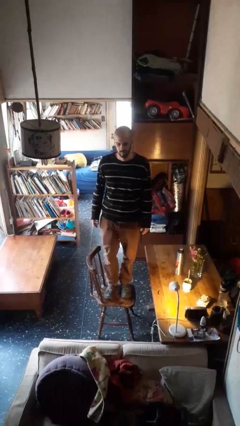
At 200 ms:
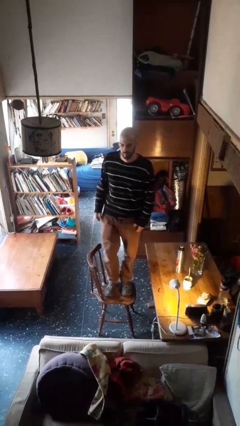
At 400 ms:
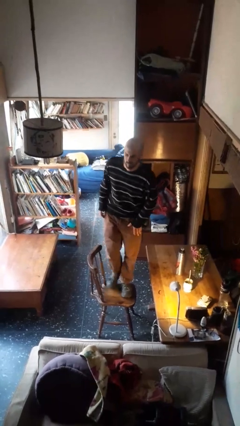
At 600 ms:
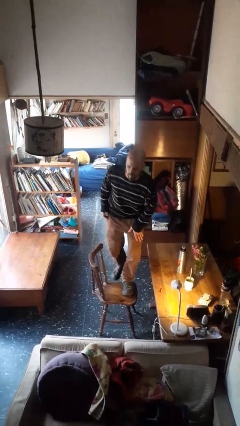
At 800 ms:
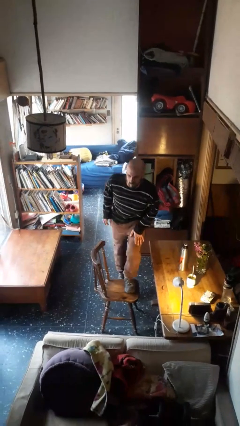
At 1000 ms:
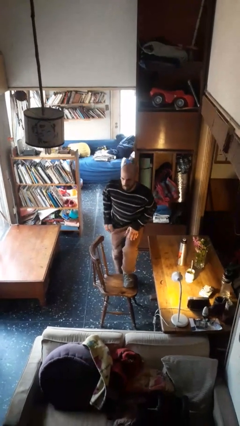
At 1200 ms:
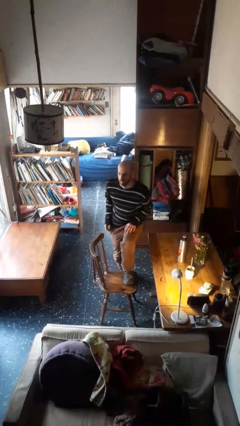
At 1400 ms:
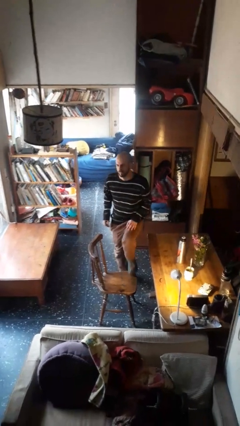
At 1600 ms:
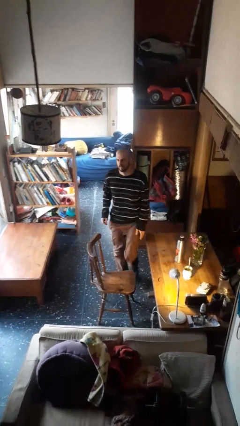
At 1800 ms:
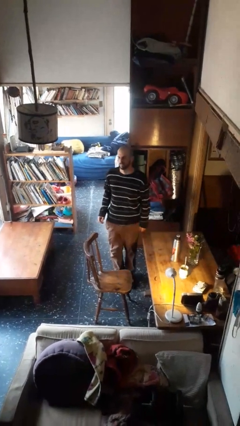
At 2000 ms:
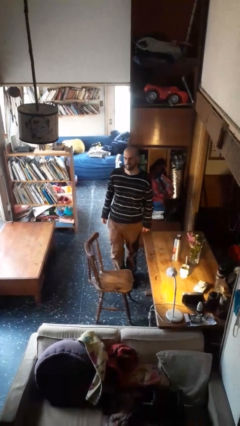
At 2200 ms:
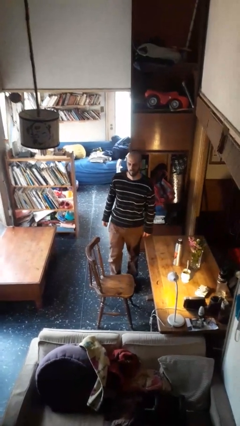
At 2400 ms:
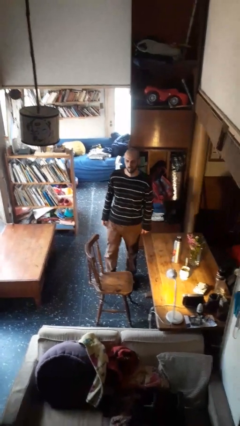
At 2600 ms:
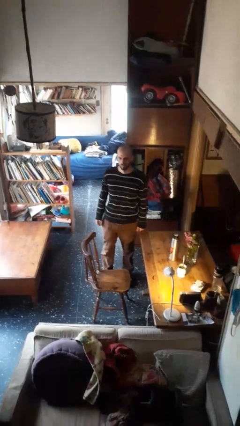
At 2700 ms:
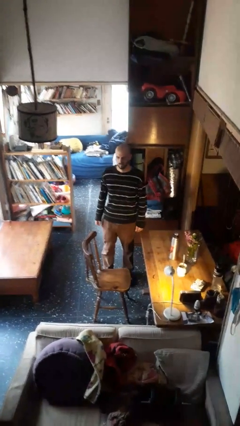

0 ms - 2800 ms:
person climbs off chair

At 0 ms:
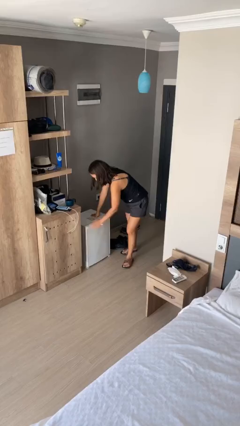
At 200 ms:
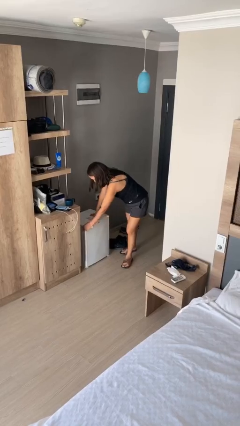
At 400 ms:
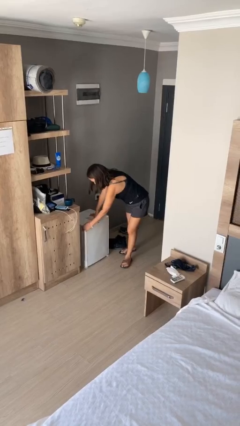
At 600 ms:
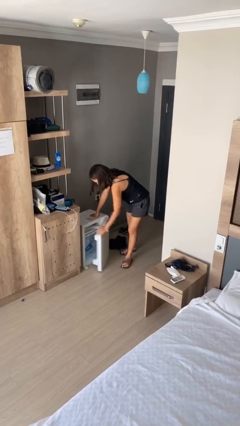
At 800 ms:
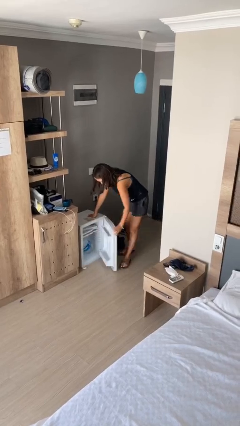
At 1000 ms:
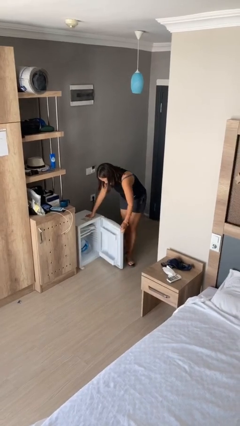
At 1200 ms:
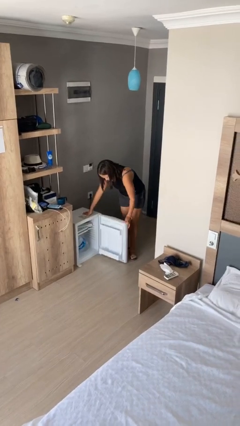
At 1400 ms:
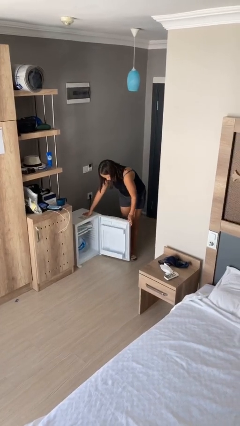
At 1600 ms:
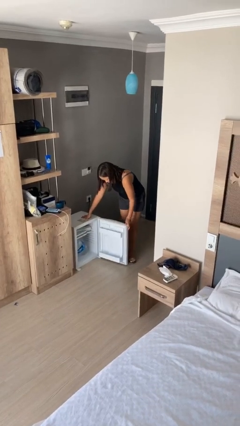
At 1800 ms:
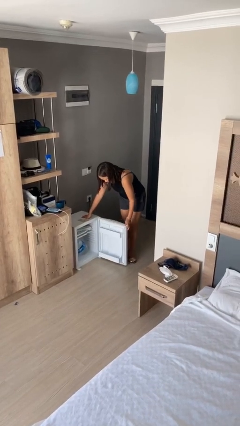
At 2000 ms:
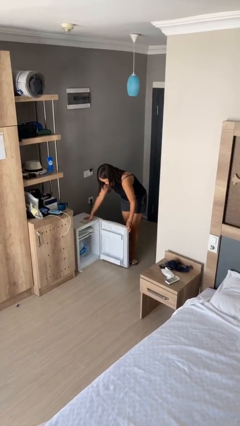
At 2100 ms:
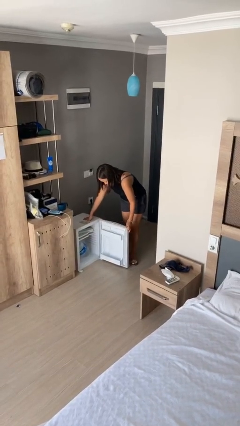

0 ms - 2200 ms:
person opens refrigerator

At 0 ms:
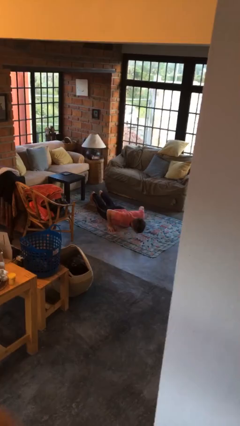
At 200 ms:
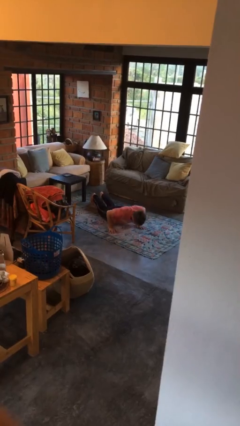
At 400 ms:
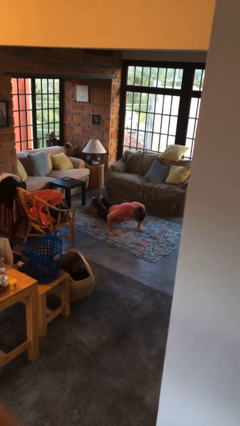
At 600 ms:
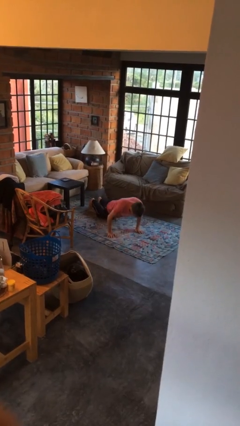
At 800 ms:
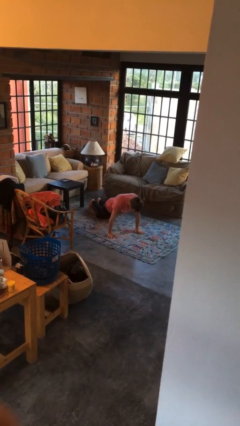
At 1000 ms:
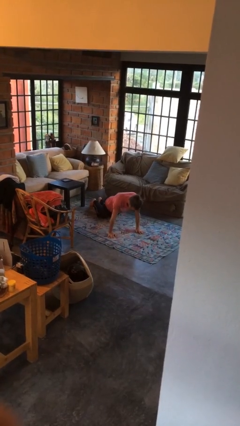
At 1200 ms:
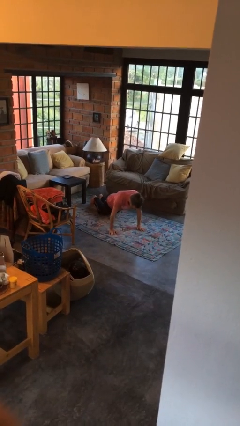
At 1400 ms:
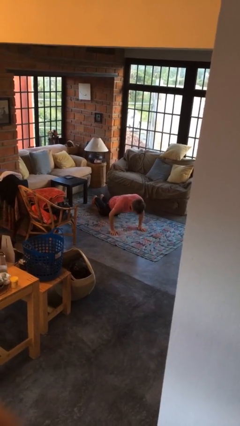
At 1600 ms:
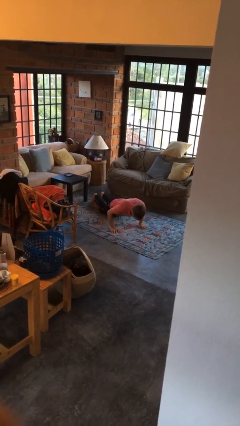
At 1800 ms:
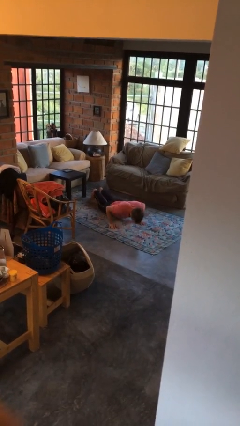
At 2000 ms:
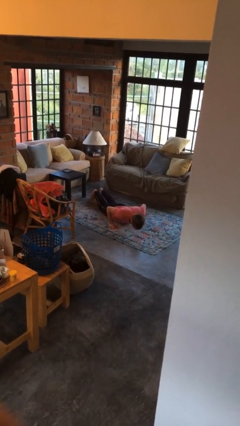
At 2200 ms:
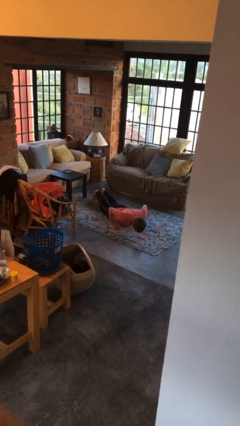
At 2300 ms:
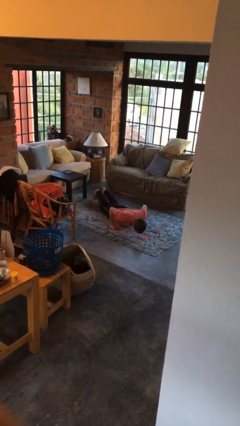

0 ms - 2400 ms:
person exercises with pushup

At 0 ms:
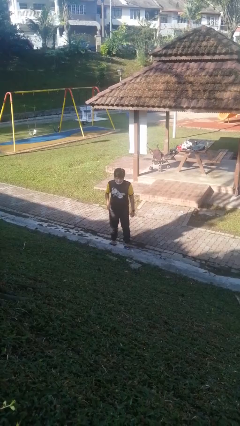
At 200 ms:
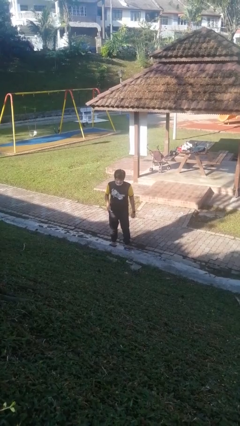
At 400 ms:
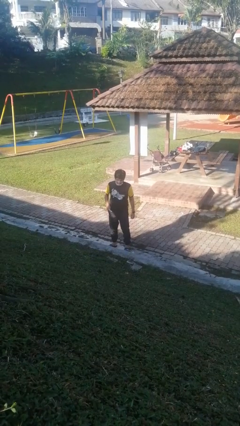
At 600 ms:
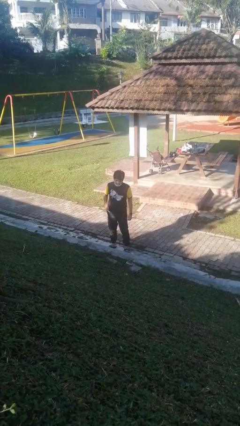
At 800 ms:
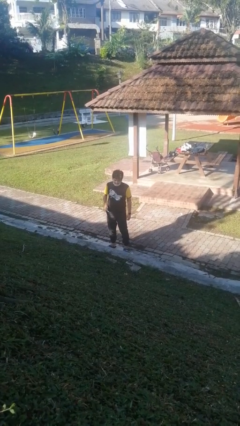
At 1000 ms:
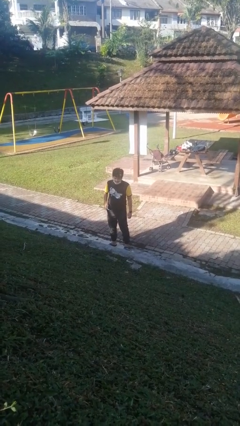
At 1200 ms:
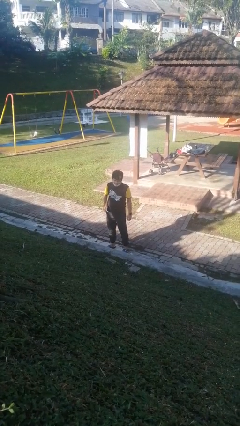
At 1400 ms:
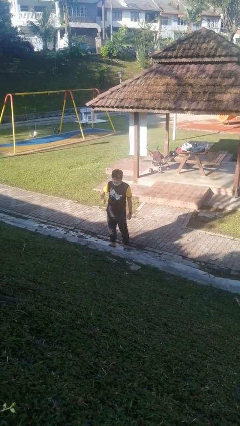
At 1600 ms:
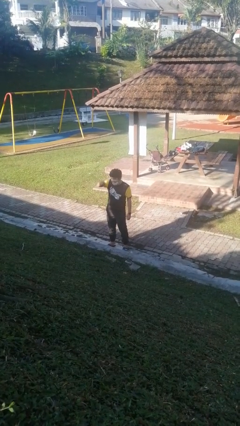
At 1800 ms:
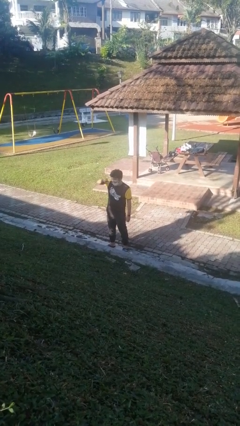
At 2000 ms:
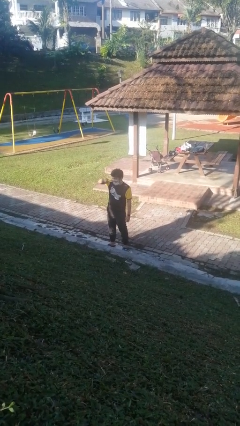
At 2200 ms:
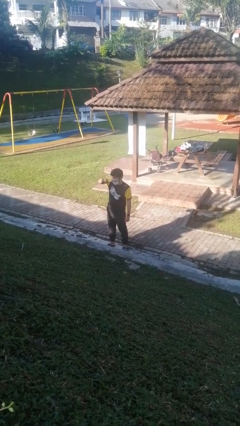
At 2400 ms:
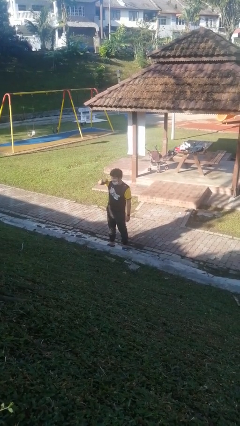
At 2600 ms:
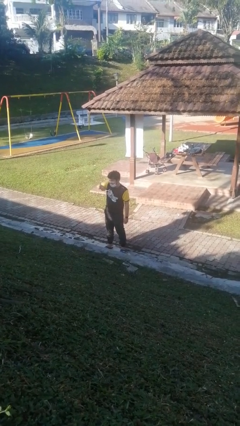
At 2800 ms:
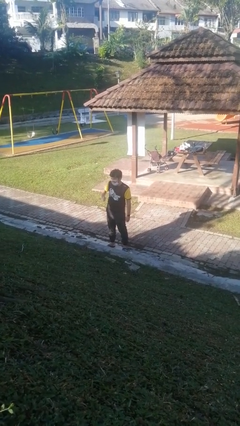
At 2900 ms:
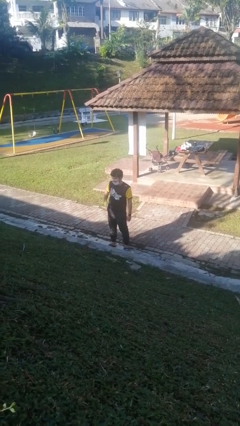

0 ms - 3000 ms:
person brushes teeth

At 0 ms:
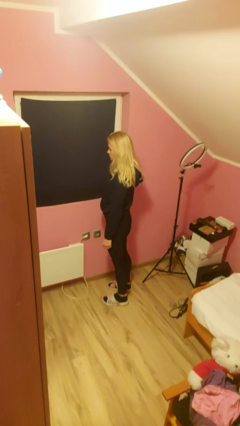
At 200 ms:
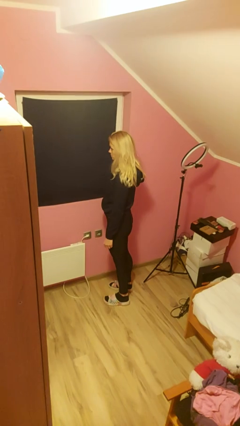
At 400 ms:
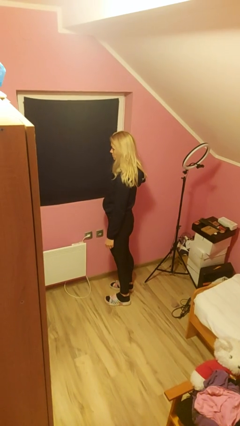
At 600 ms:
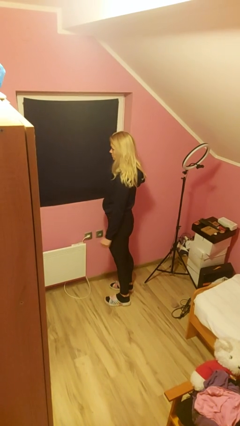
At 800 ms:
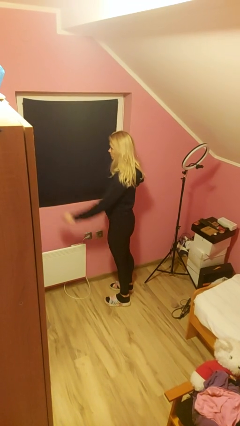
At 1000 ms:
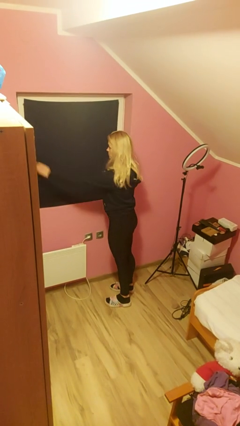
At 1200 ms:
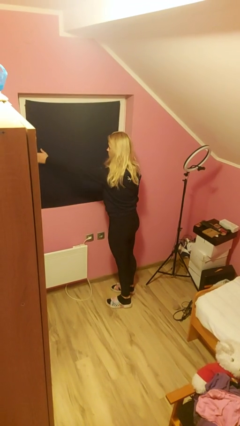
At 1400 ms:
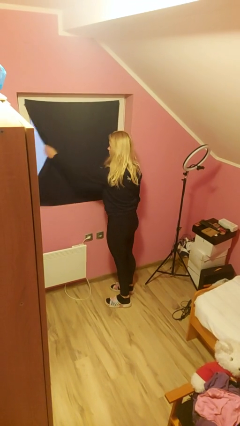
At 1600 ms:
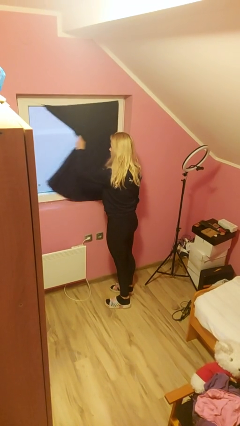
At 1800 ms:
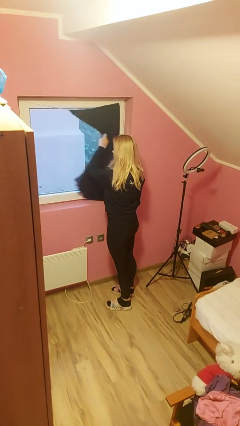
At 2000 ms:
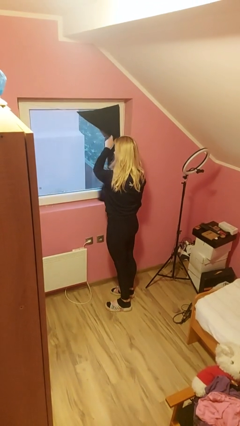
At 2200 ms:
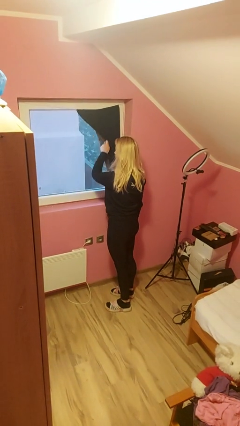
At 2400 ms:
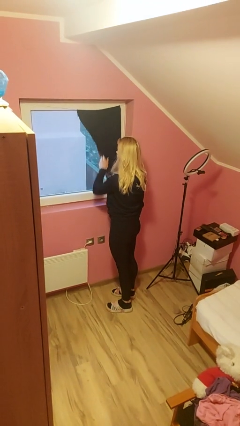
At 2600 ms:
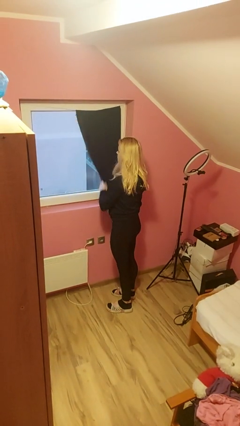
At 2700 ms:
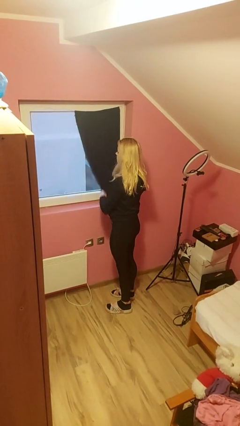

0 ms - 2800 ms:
person opens curtains

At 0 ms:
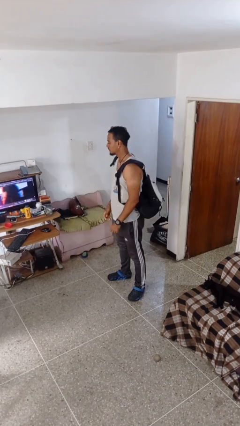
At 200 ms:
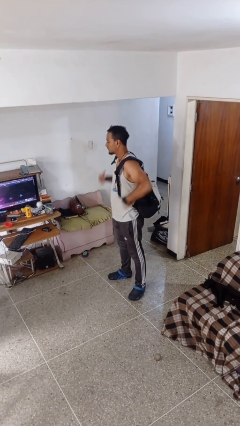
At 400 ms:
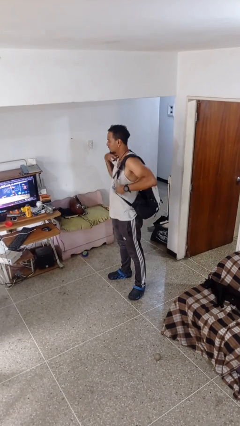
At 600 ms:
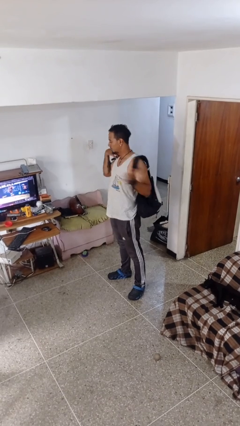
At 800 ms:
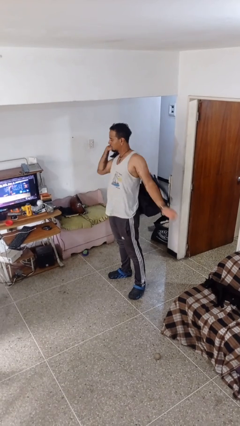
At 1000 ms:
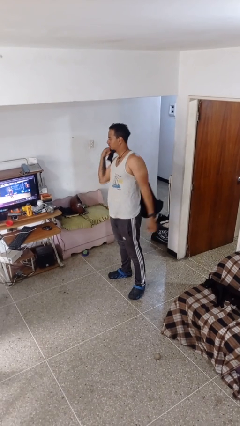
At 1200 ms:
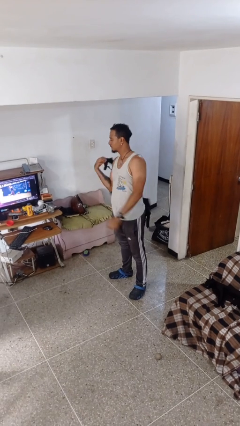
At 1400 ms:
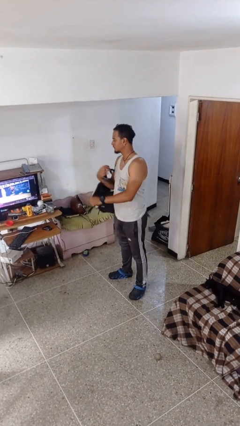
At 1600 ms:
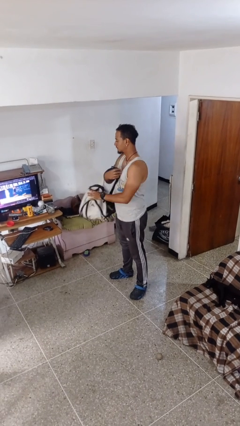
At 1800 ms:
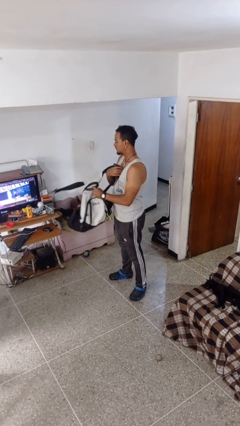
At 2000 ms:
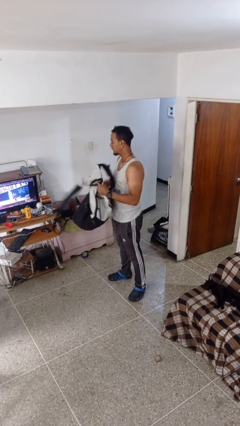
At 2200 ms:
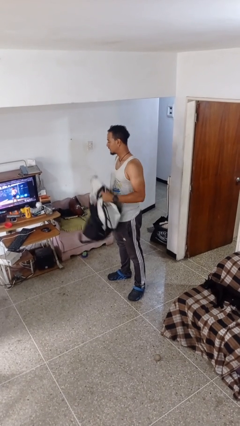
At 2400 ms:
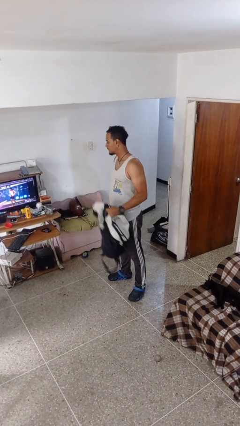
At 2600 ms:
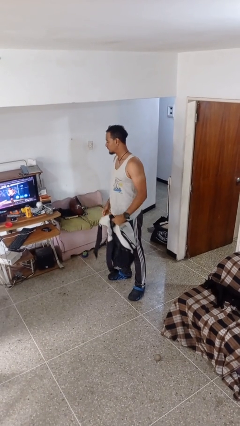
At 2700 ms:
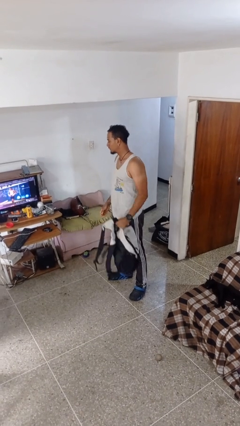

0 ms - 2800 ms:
person takes off backpack

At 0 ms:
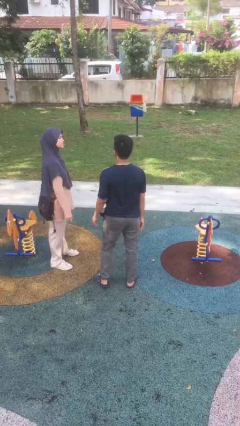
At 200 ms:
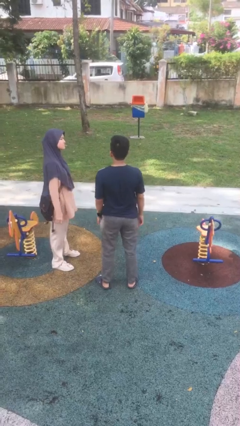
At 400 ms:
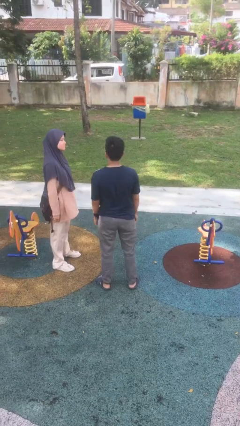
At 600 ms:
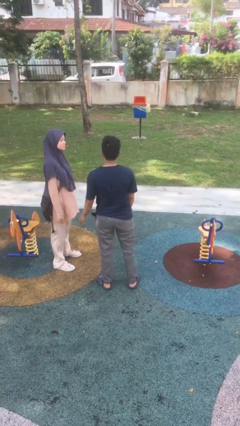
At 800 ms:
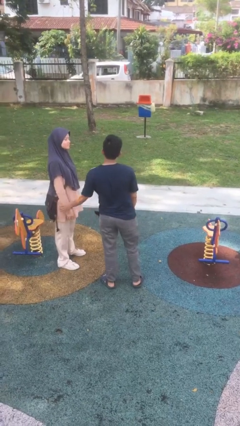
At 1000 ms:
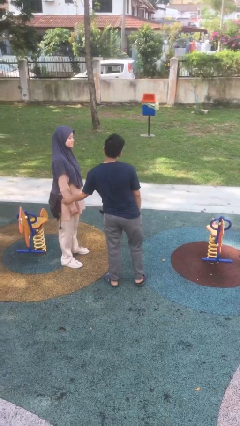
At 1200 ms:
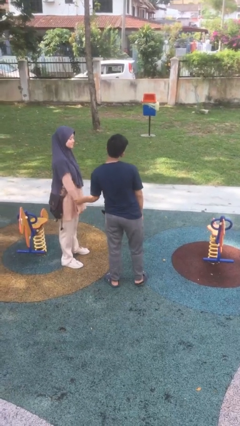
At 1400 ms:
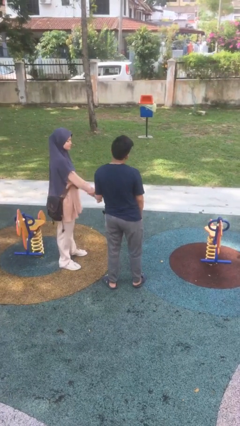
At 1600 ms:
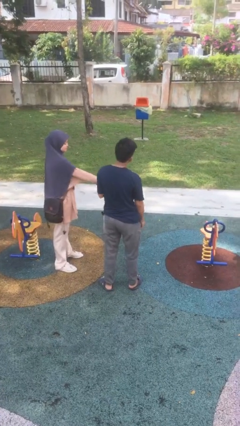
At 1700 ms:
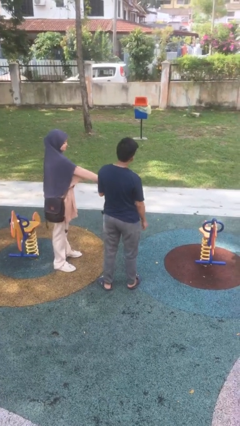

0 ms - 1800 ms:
person grabs person by forearm
